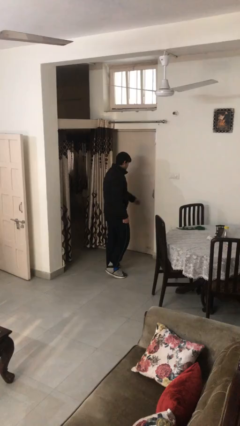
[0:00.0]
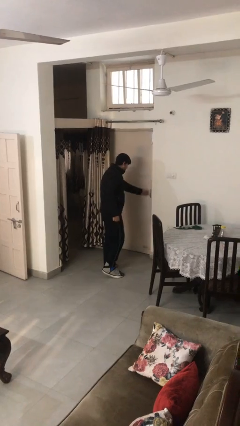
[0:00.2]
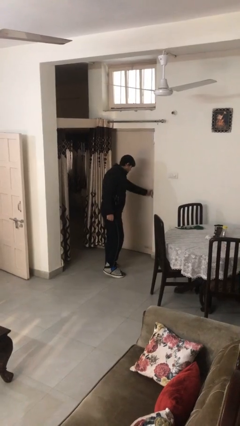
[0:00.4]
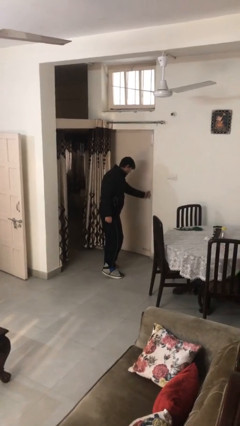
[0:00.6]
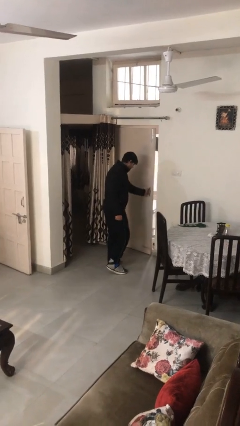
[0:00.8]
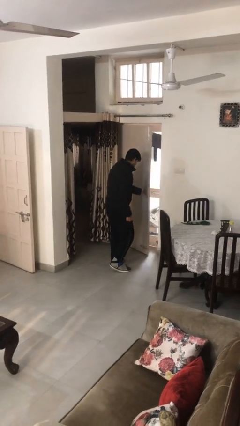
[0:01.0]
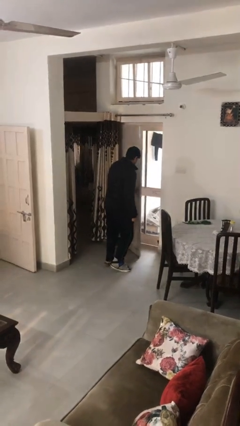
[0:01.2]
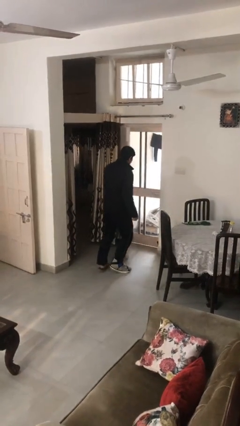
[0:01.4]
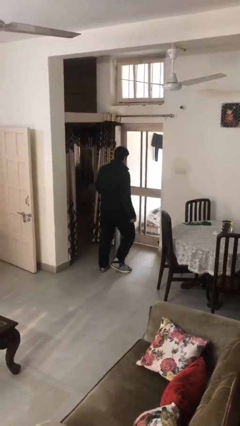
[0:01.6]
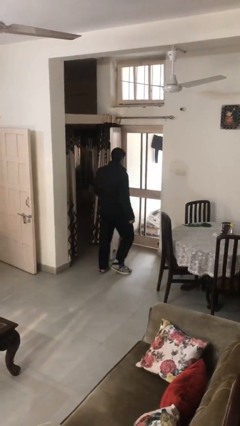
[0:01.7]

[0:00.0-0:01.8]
person opens facility door

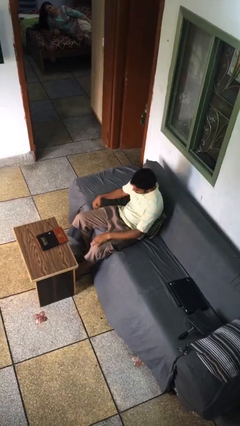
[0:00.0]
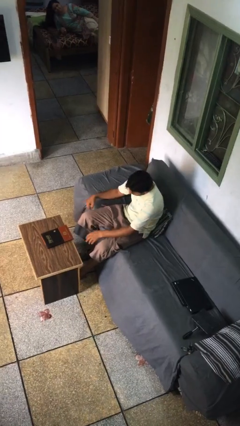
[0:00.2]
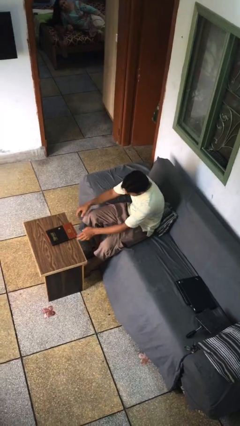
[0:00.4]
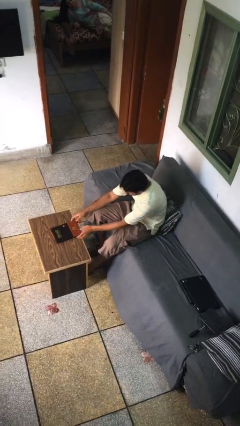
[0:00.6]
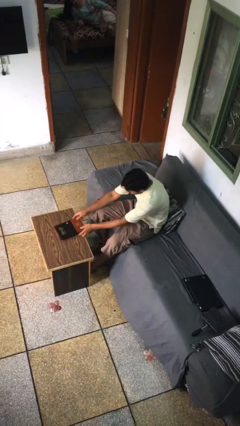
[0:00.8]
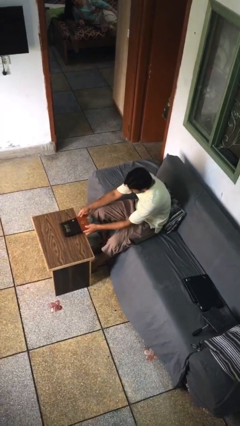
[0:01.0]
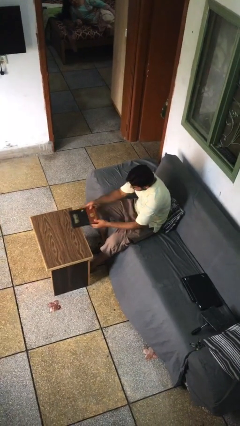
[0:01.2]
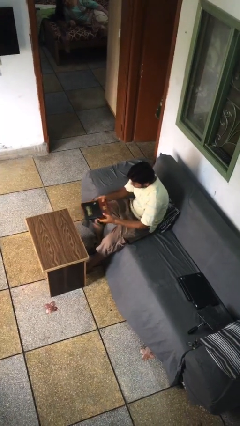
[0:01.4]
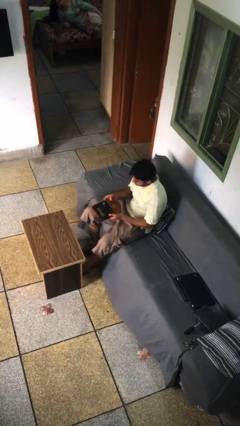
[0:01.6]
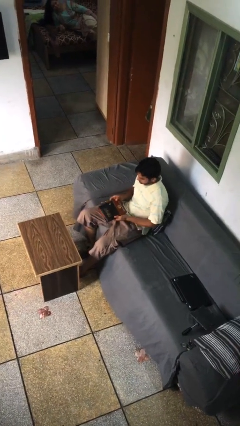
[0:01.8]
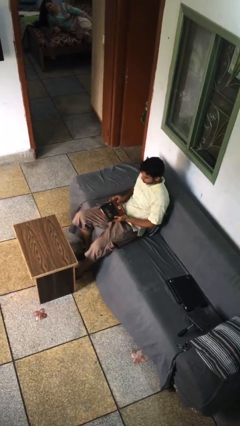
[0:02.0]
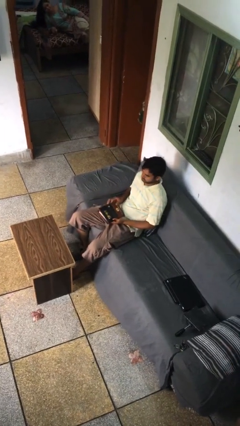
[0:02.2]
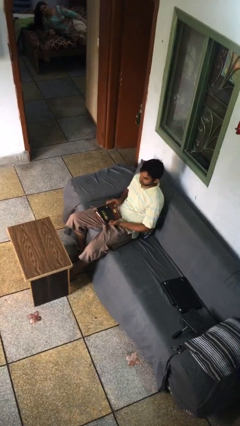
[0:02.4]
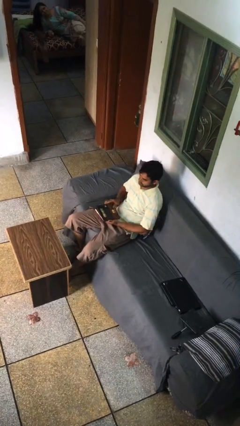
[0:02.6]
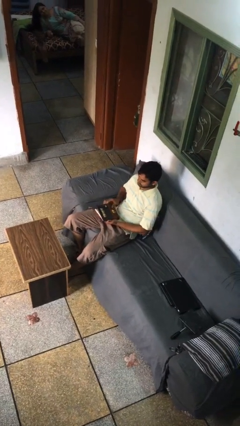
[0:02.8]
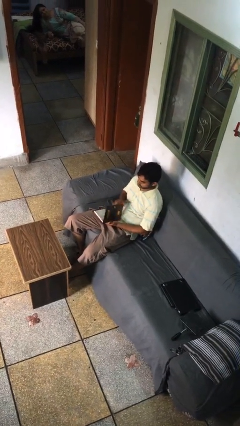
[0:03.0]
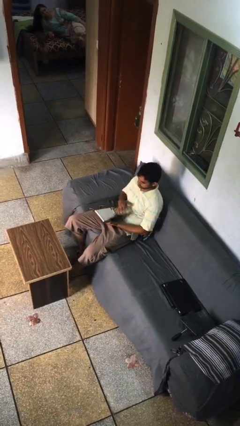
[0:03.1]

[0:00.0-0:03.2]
person picks up object from table

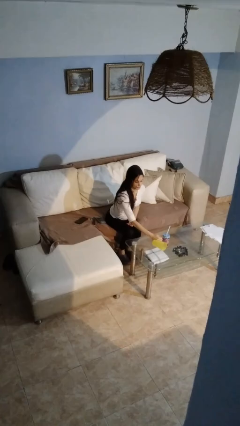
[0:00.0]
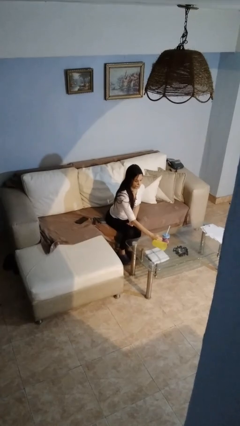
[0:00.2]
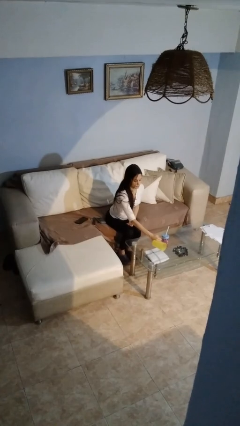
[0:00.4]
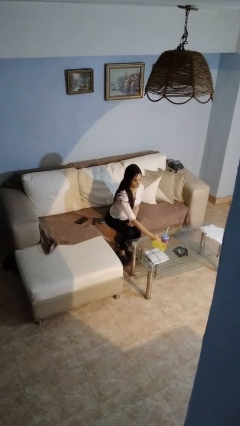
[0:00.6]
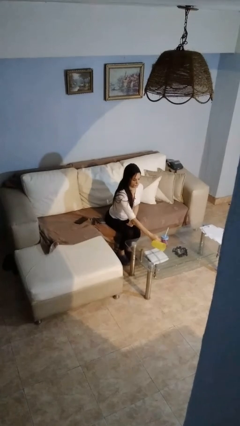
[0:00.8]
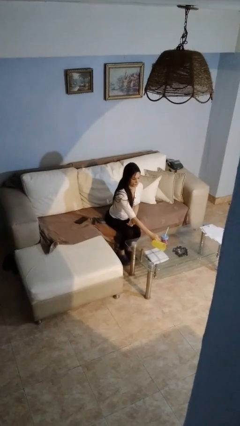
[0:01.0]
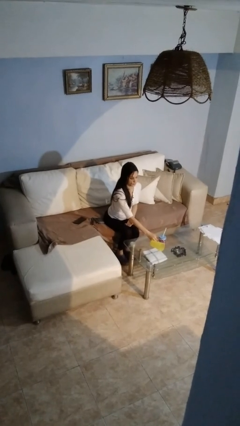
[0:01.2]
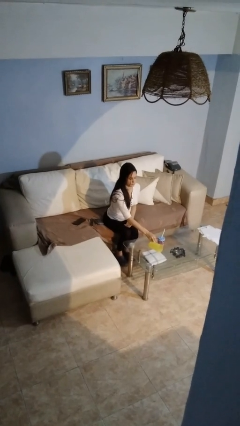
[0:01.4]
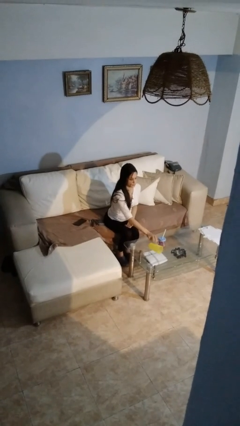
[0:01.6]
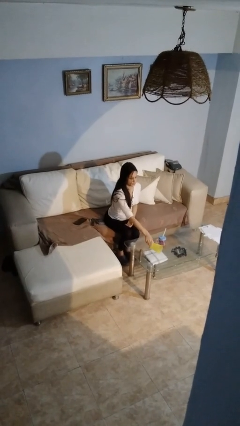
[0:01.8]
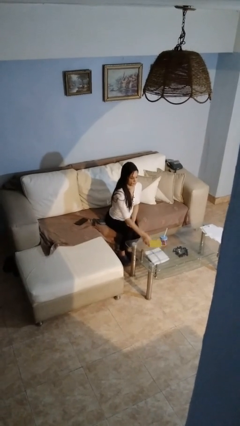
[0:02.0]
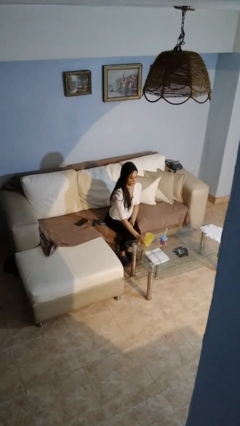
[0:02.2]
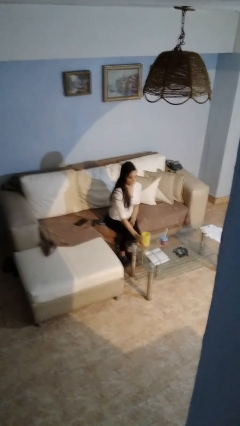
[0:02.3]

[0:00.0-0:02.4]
person sets upright glass

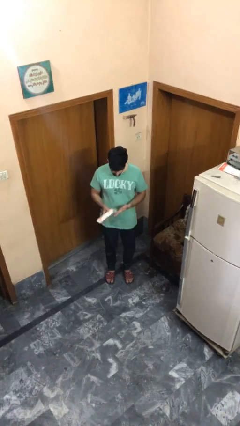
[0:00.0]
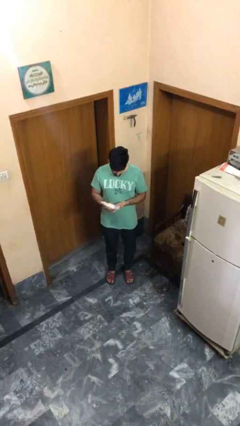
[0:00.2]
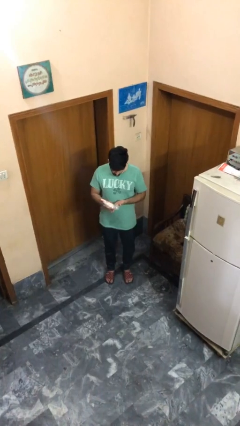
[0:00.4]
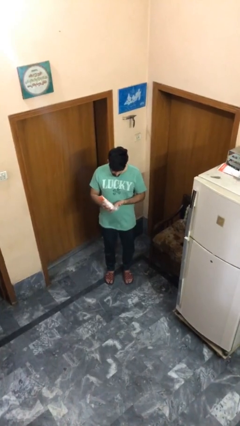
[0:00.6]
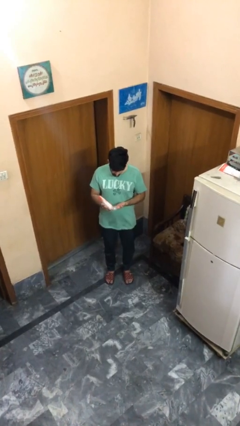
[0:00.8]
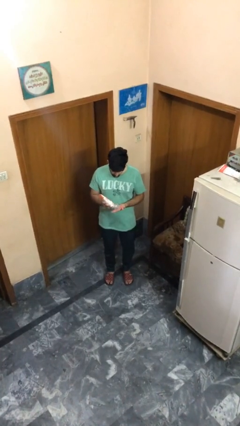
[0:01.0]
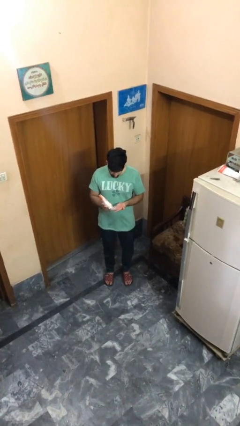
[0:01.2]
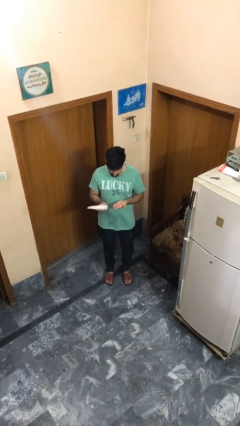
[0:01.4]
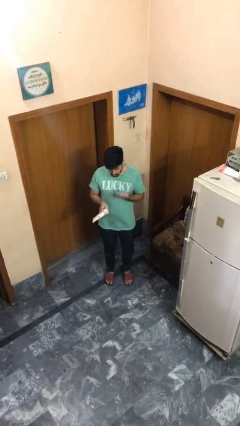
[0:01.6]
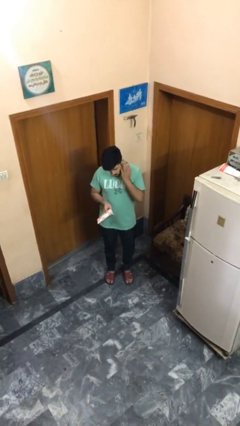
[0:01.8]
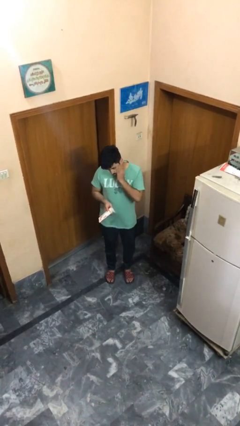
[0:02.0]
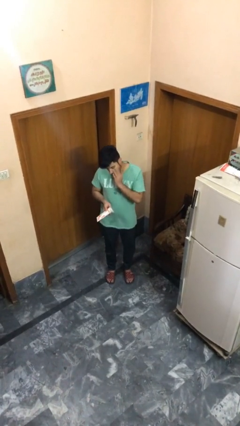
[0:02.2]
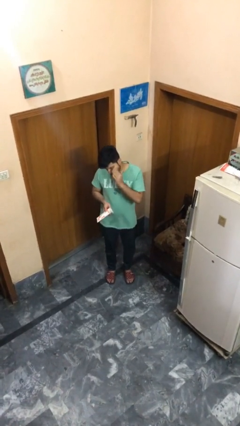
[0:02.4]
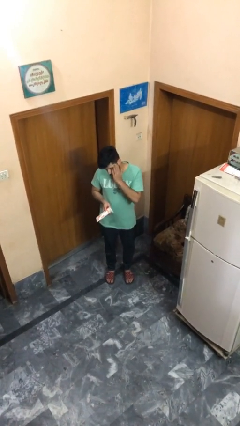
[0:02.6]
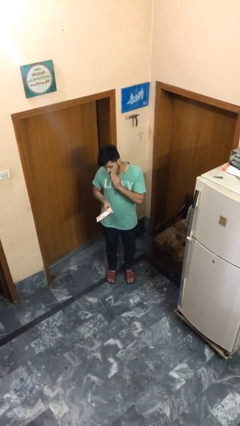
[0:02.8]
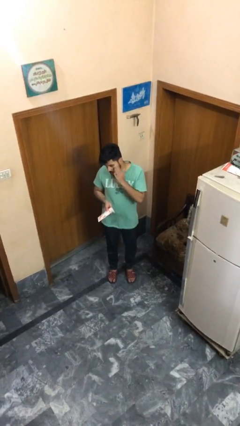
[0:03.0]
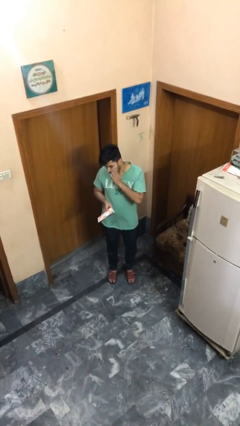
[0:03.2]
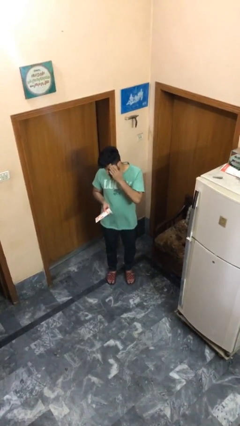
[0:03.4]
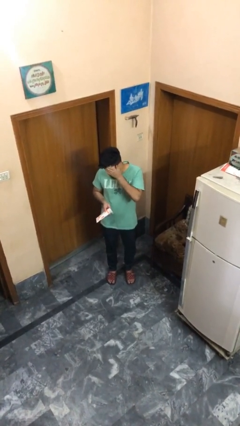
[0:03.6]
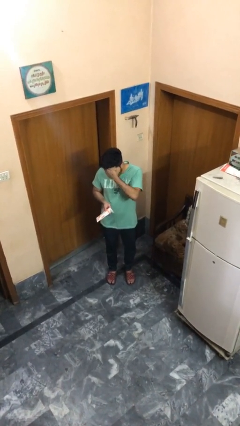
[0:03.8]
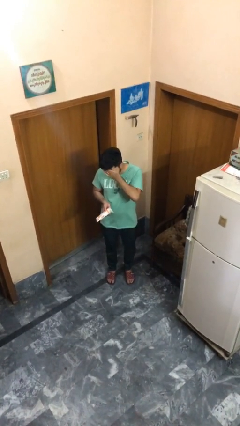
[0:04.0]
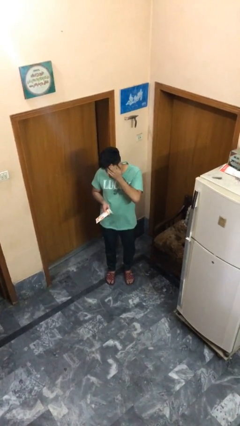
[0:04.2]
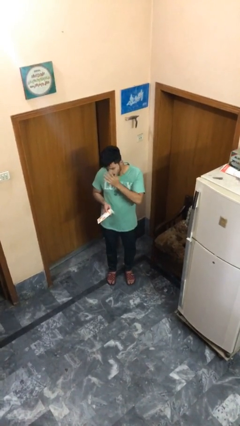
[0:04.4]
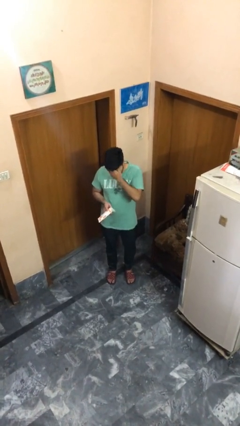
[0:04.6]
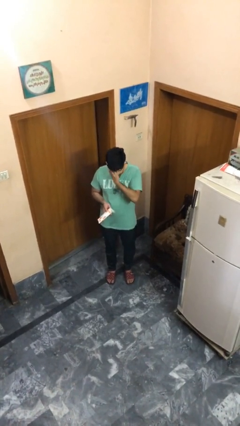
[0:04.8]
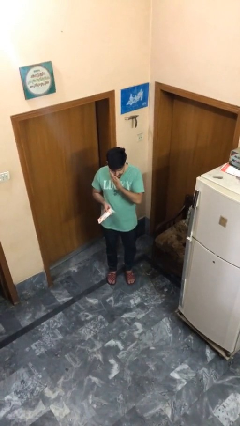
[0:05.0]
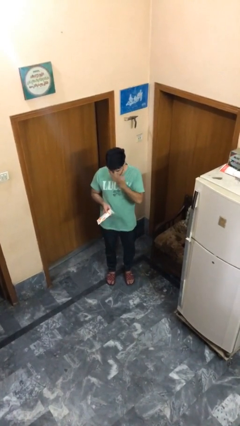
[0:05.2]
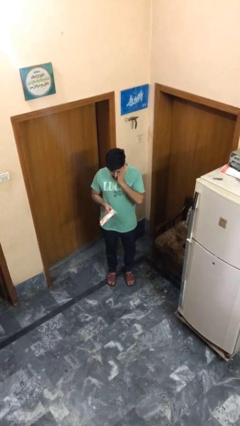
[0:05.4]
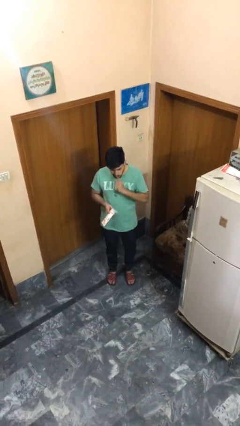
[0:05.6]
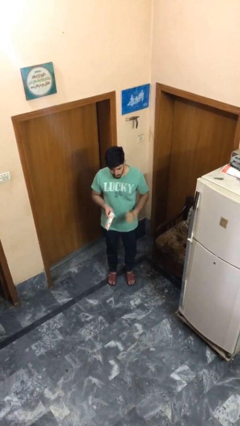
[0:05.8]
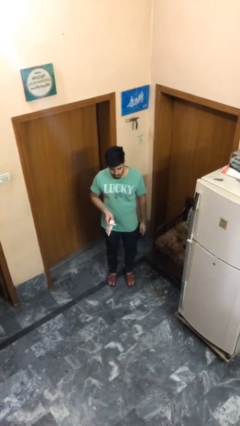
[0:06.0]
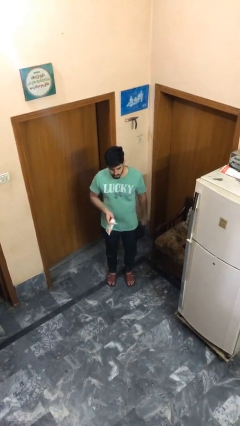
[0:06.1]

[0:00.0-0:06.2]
person applies sunscreen

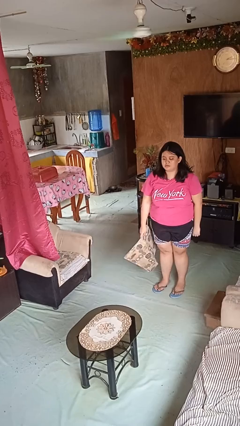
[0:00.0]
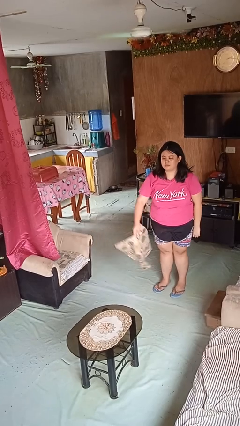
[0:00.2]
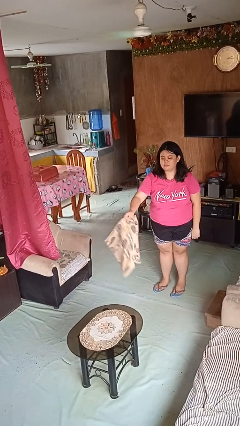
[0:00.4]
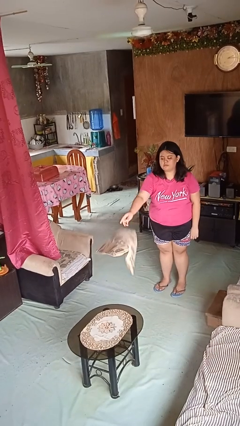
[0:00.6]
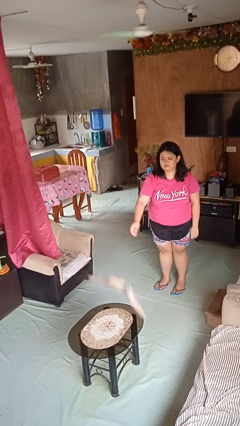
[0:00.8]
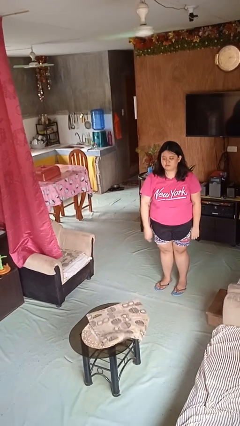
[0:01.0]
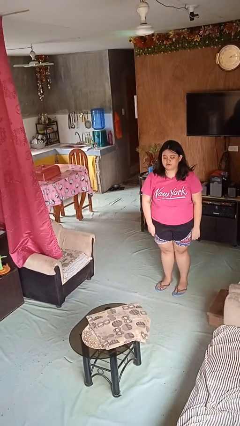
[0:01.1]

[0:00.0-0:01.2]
person throws object on table

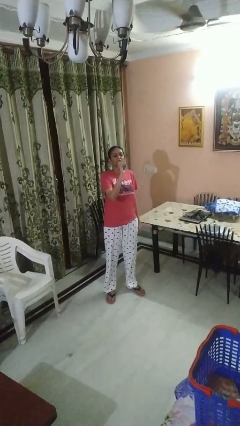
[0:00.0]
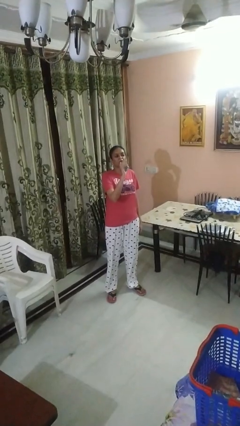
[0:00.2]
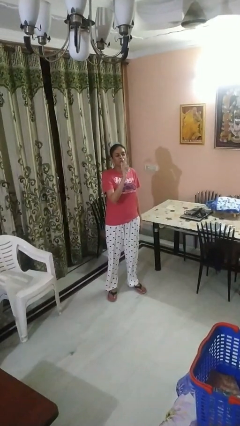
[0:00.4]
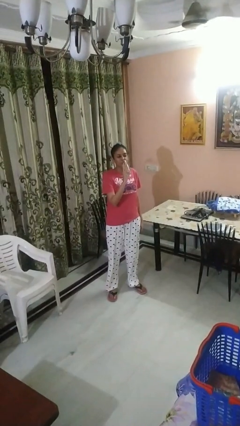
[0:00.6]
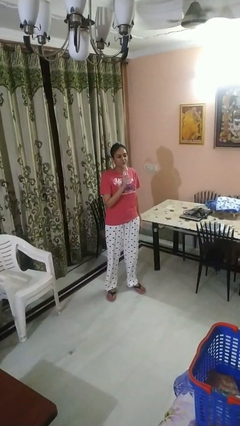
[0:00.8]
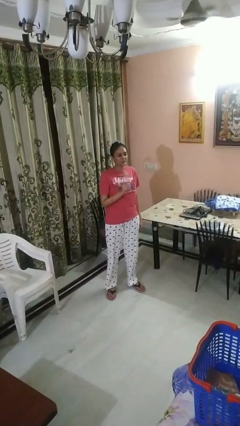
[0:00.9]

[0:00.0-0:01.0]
person drinks from bottle

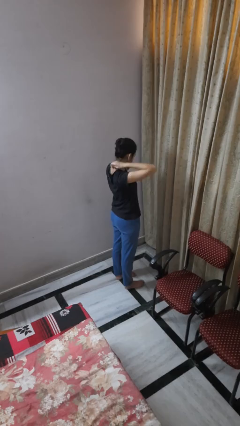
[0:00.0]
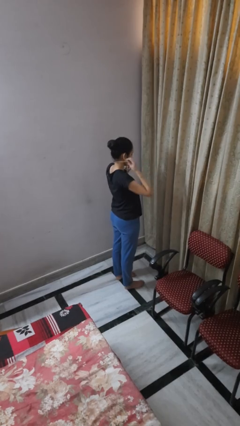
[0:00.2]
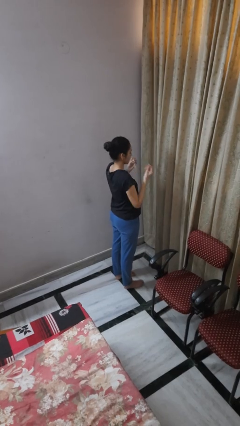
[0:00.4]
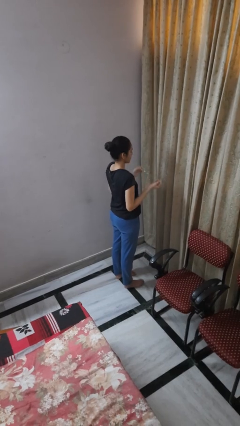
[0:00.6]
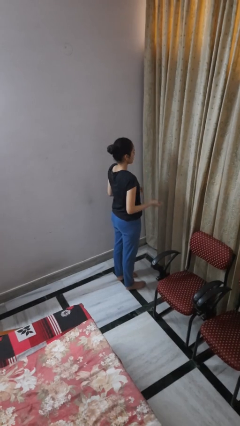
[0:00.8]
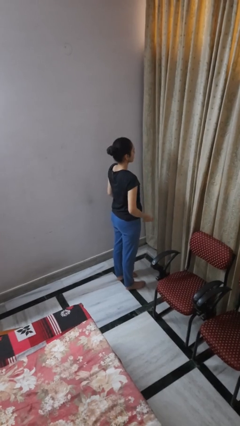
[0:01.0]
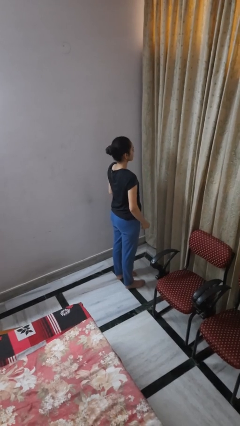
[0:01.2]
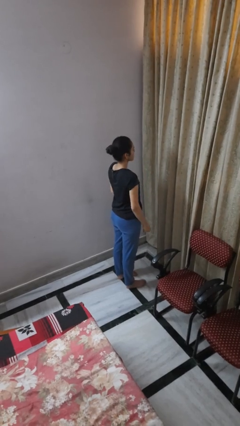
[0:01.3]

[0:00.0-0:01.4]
person takes off necklace
